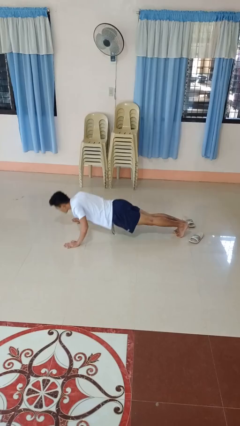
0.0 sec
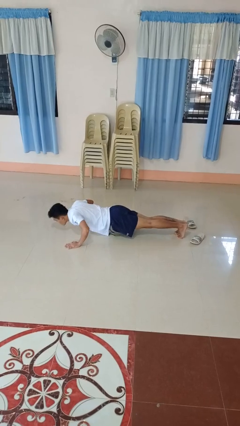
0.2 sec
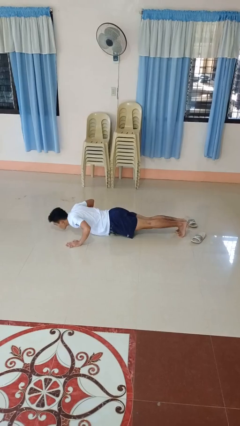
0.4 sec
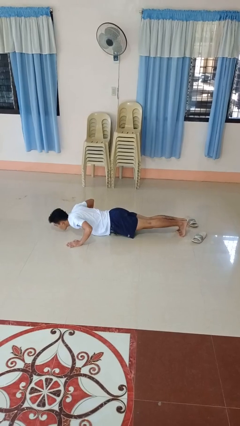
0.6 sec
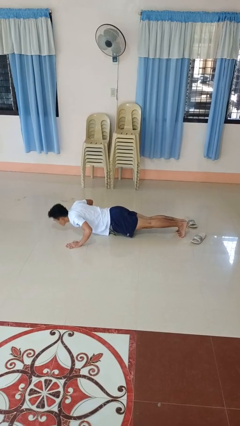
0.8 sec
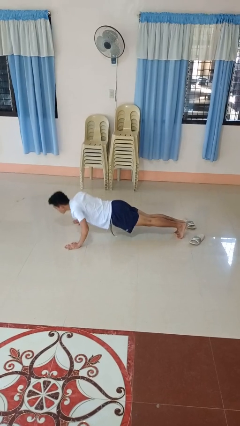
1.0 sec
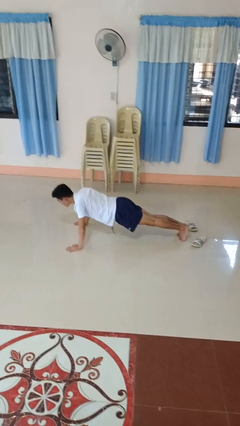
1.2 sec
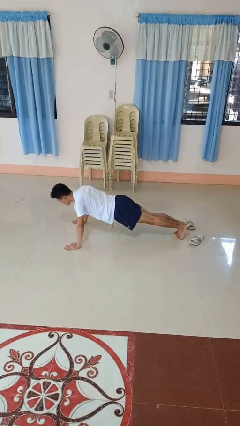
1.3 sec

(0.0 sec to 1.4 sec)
person exercises with pushup

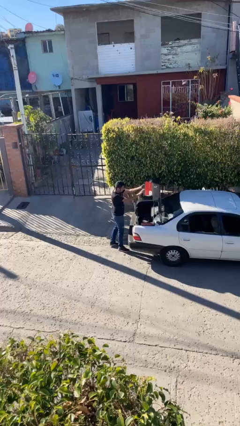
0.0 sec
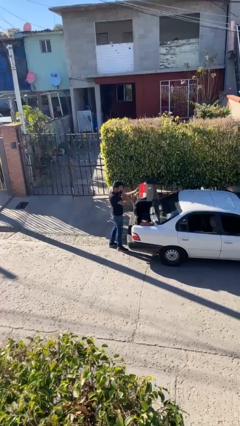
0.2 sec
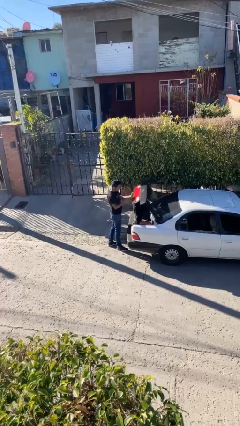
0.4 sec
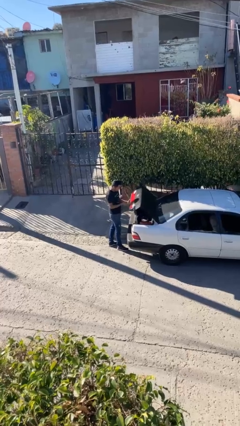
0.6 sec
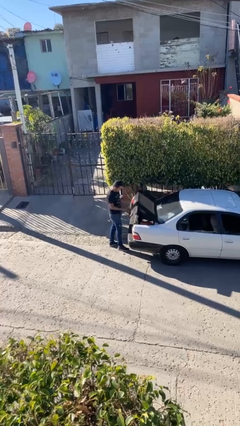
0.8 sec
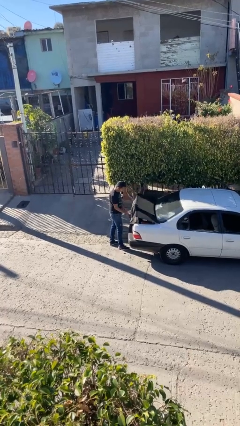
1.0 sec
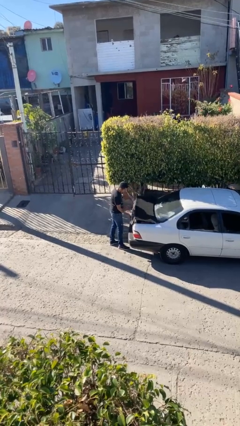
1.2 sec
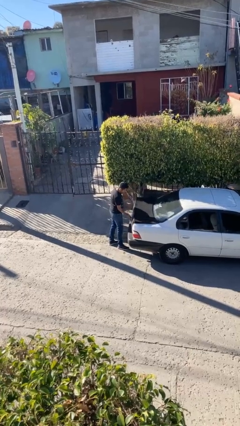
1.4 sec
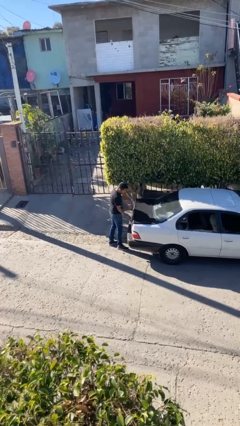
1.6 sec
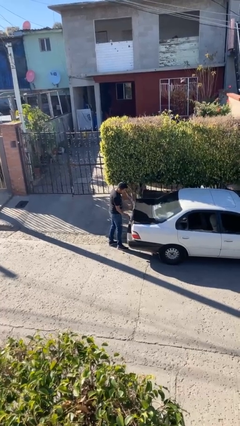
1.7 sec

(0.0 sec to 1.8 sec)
person closes car trunk

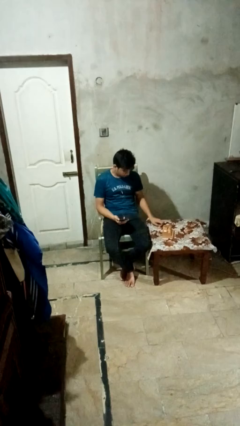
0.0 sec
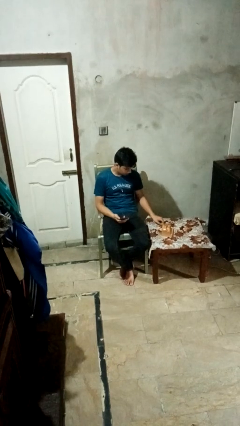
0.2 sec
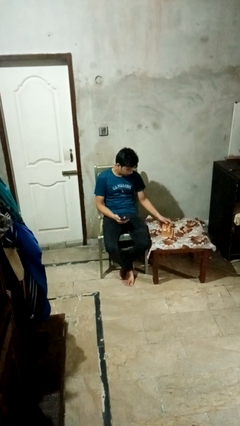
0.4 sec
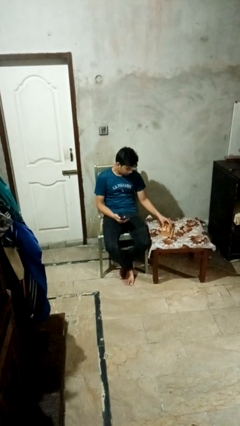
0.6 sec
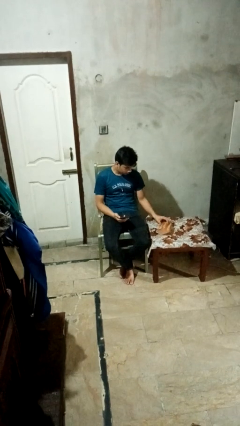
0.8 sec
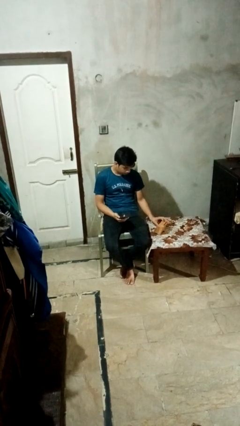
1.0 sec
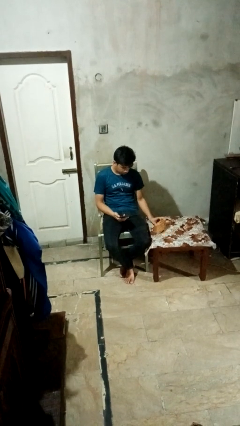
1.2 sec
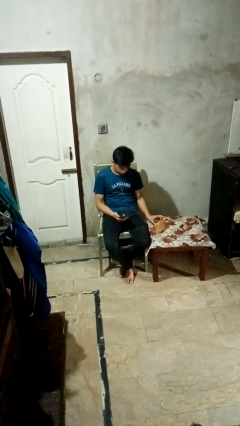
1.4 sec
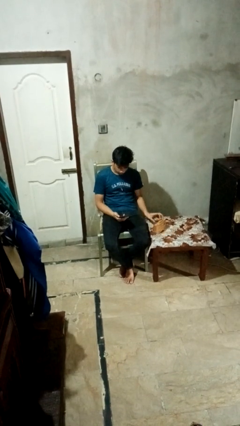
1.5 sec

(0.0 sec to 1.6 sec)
person sets upright furniture

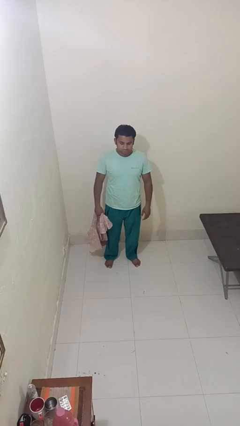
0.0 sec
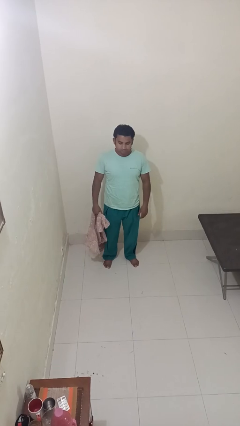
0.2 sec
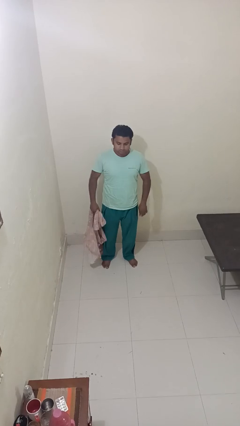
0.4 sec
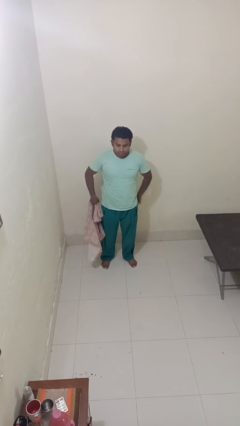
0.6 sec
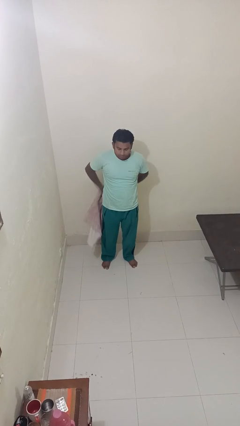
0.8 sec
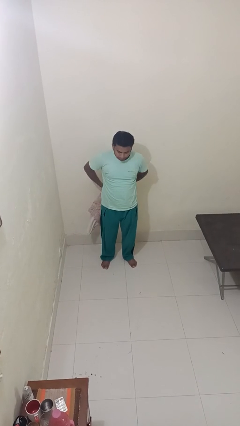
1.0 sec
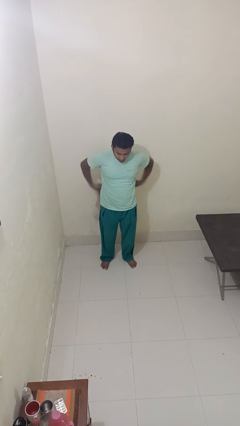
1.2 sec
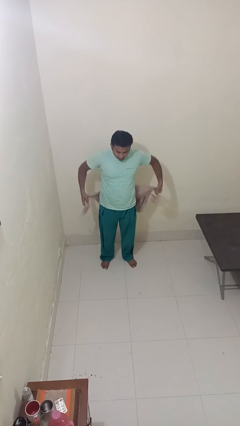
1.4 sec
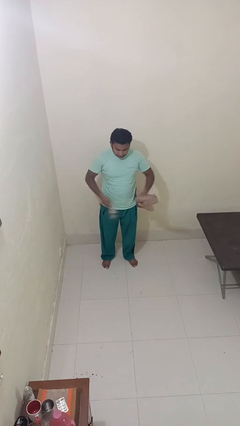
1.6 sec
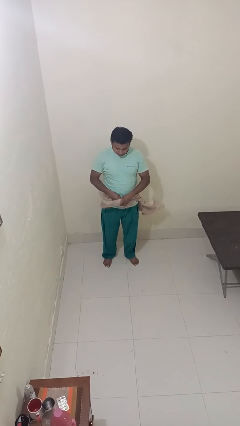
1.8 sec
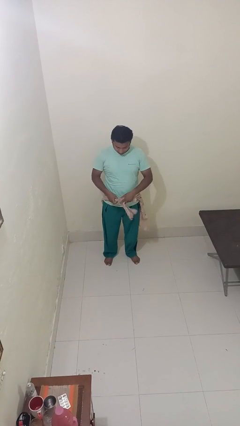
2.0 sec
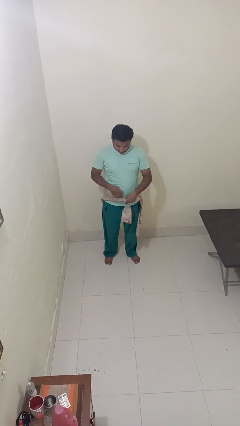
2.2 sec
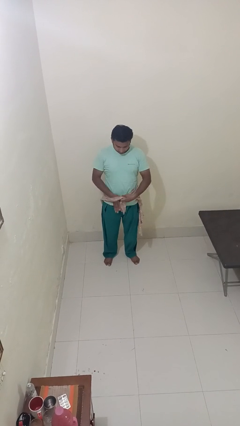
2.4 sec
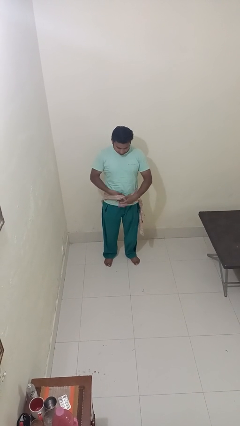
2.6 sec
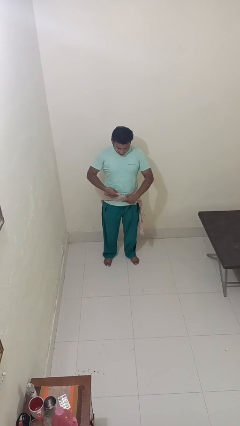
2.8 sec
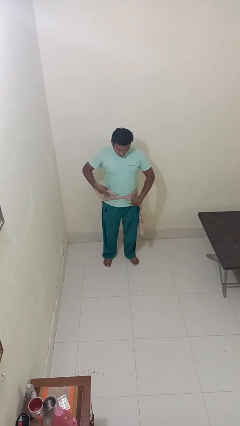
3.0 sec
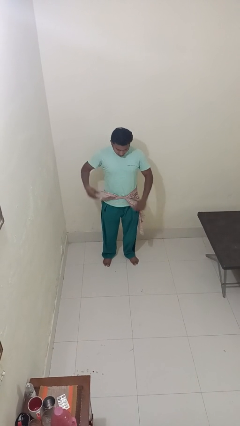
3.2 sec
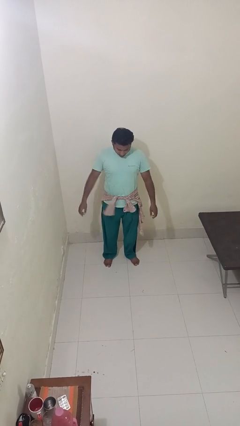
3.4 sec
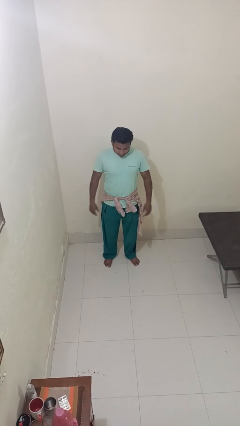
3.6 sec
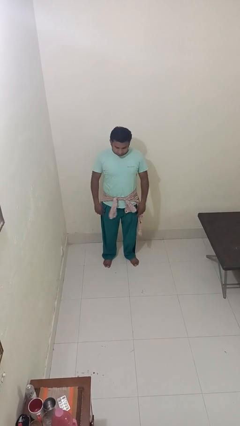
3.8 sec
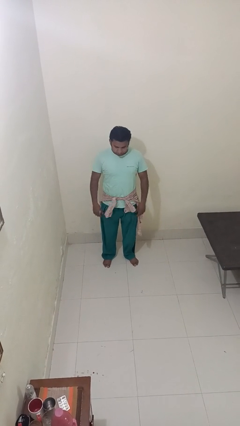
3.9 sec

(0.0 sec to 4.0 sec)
person ties jacket around waist

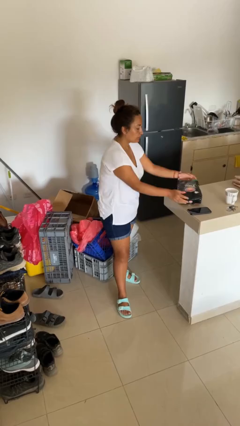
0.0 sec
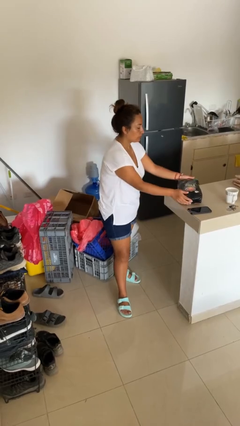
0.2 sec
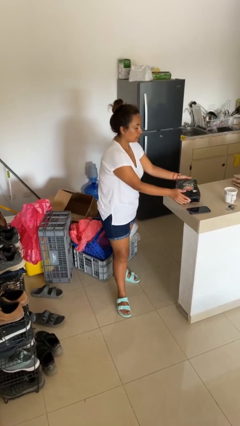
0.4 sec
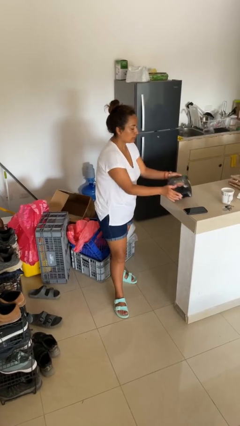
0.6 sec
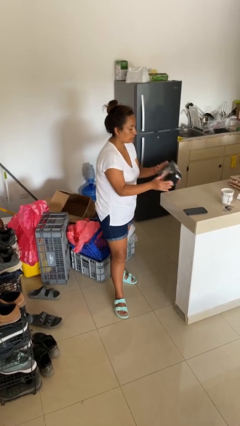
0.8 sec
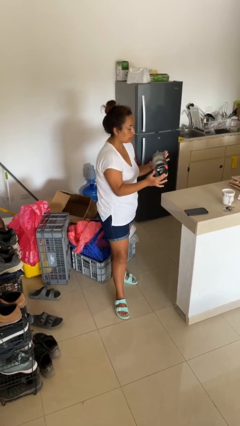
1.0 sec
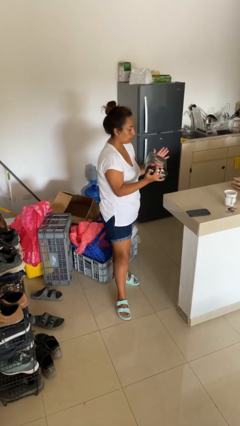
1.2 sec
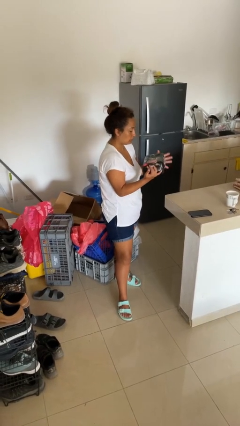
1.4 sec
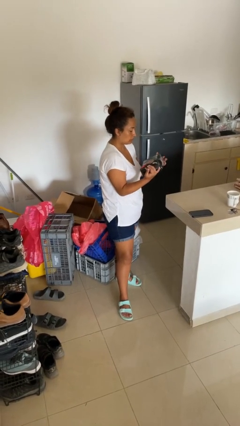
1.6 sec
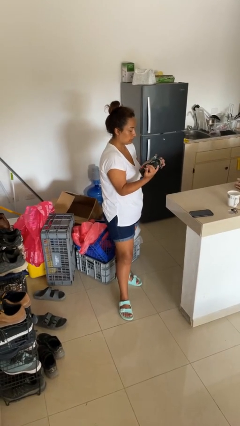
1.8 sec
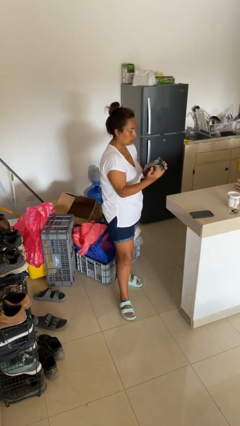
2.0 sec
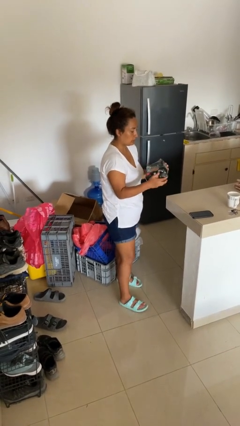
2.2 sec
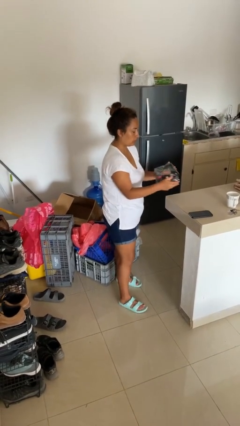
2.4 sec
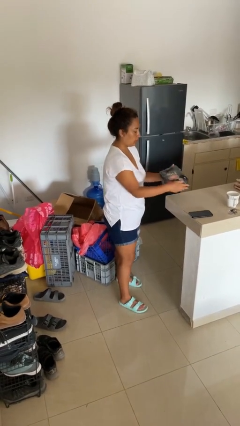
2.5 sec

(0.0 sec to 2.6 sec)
person picks up object from countertop

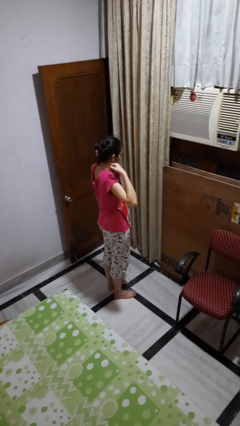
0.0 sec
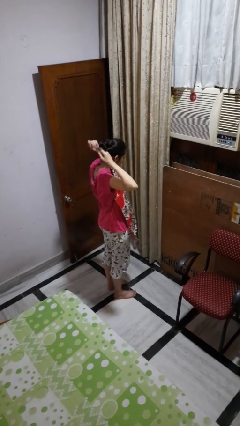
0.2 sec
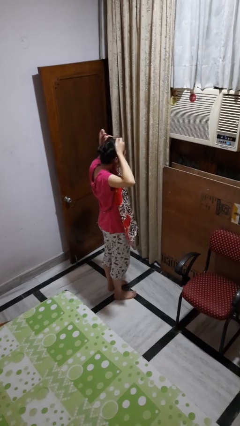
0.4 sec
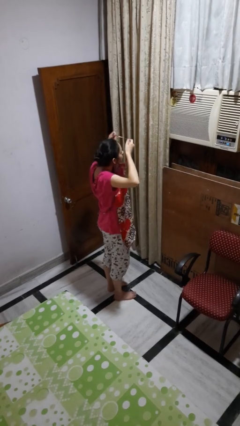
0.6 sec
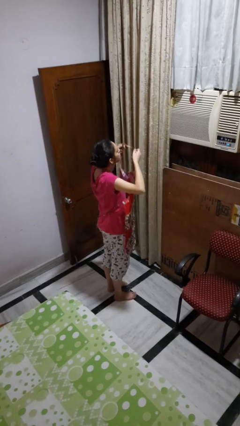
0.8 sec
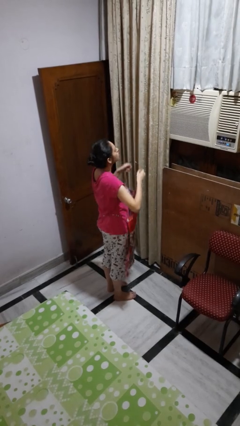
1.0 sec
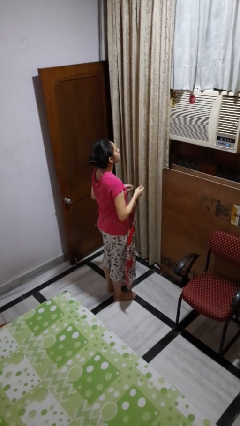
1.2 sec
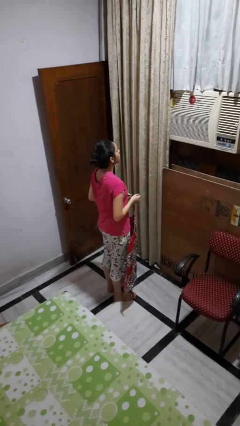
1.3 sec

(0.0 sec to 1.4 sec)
person takes off apron

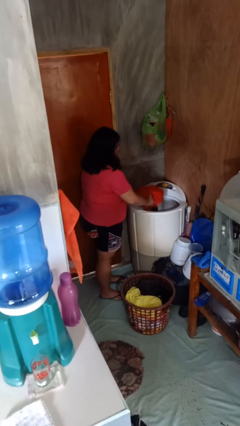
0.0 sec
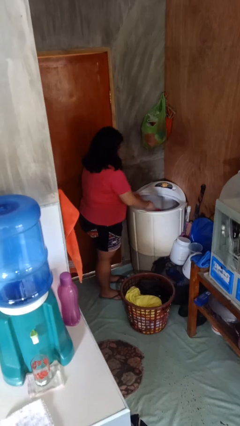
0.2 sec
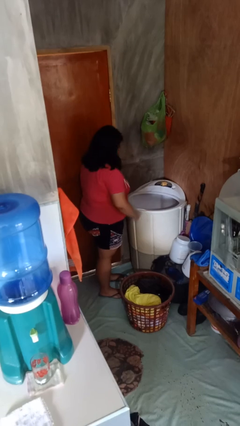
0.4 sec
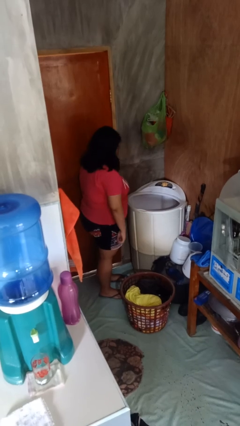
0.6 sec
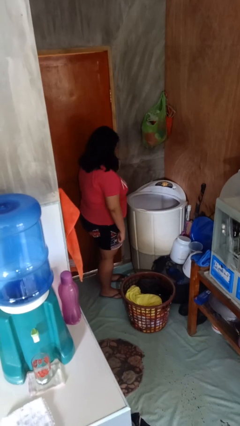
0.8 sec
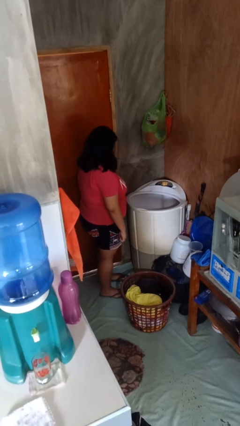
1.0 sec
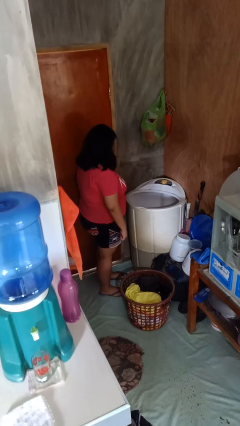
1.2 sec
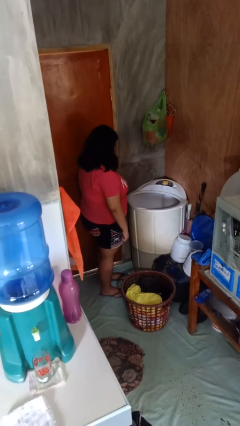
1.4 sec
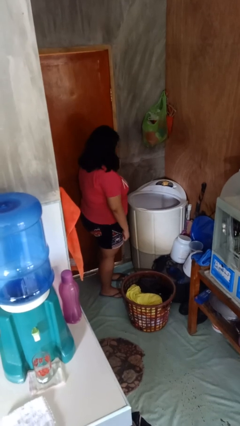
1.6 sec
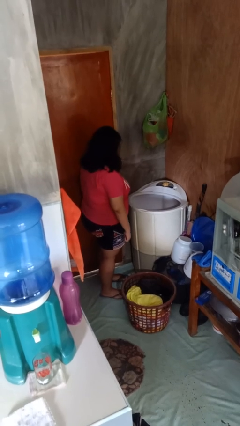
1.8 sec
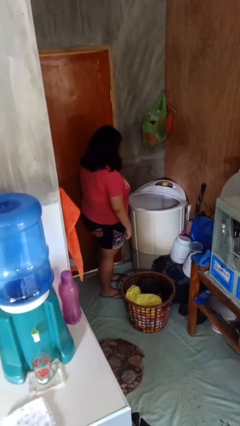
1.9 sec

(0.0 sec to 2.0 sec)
person loads dryer

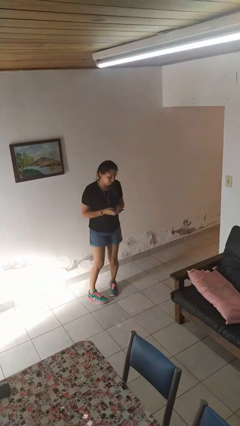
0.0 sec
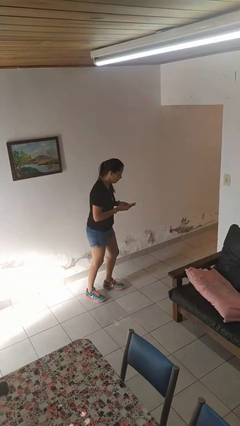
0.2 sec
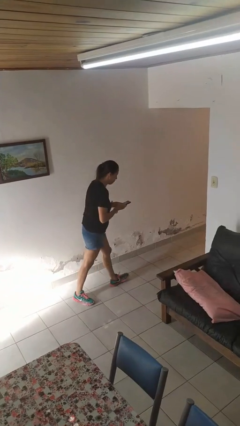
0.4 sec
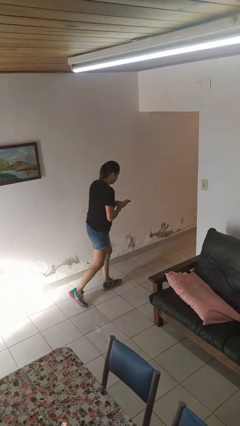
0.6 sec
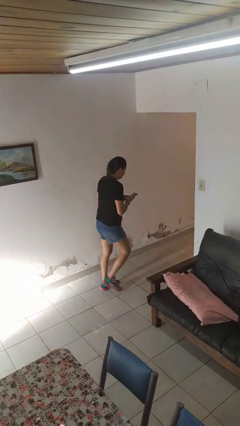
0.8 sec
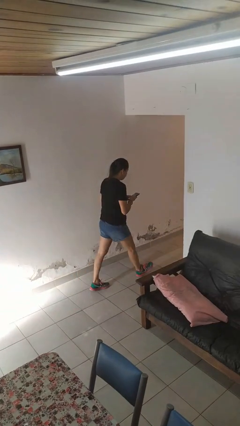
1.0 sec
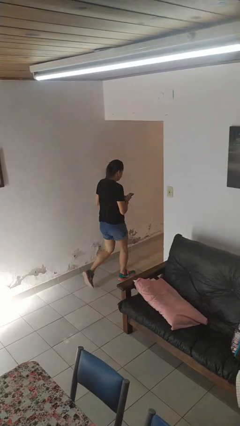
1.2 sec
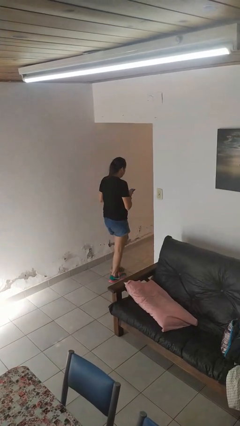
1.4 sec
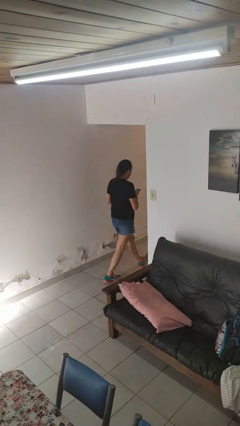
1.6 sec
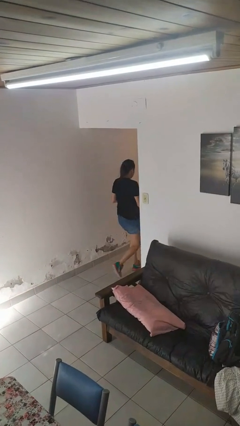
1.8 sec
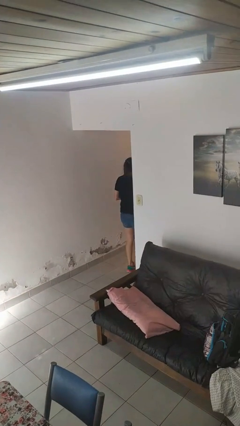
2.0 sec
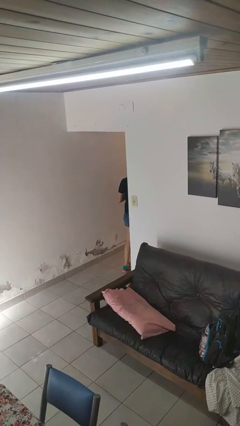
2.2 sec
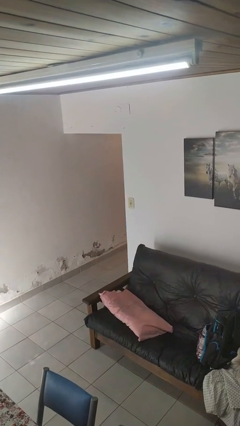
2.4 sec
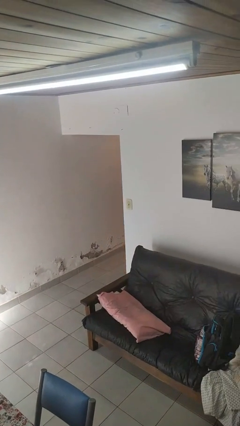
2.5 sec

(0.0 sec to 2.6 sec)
person exits scene through structure
